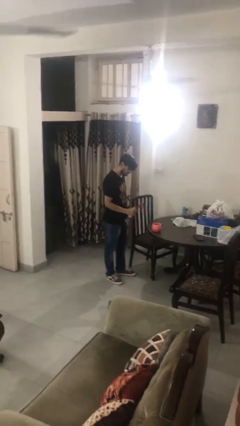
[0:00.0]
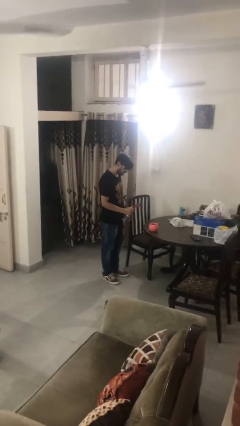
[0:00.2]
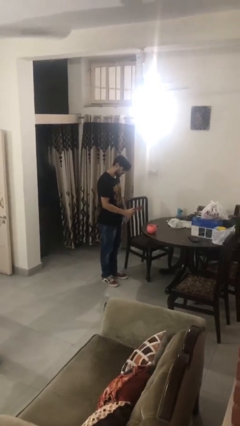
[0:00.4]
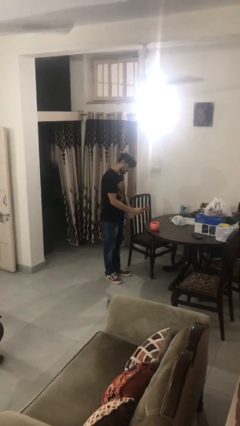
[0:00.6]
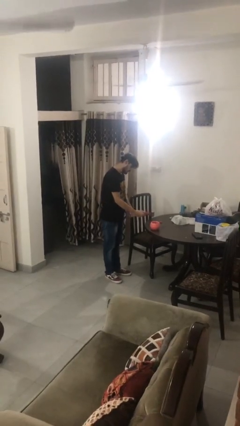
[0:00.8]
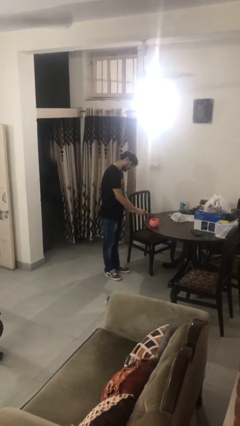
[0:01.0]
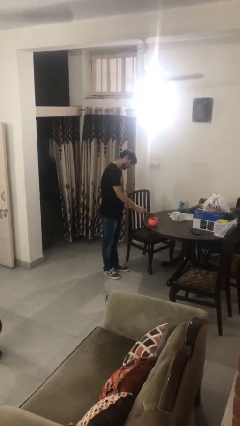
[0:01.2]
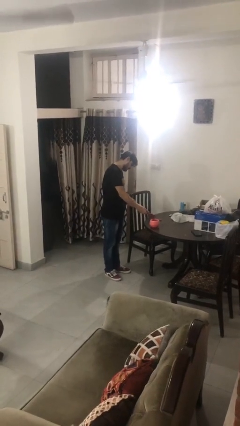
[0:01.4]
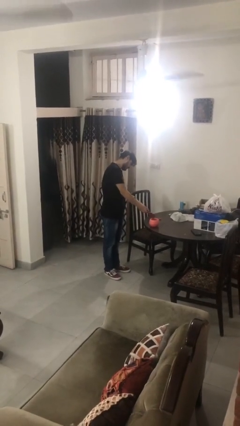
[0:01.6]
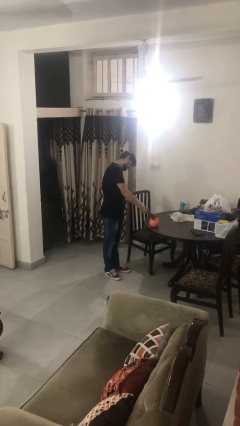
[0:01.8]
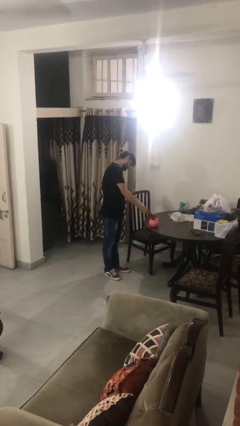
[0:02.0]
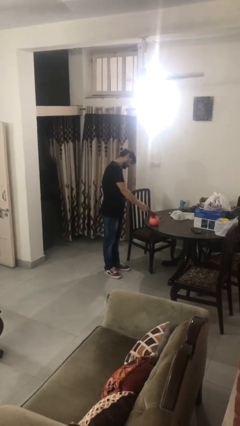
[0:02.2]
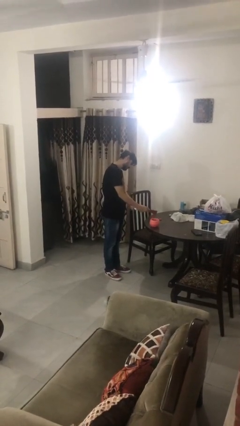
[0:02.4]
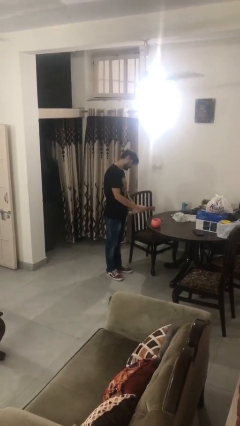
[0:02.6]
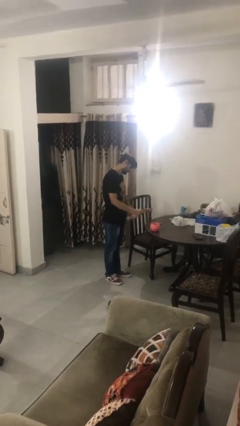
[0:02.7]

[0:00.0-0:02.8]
person waters houseplant

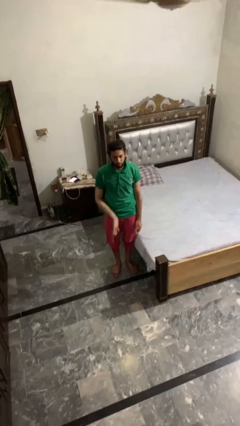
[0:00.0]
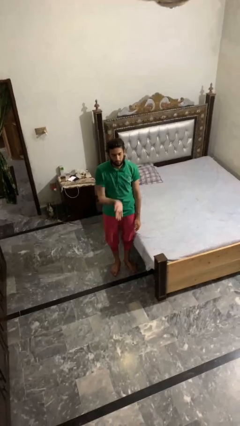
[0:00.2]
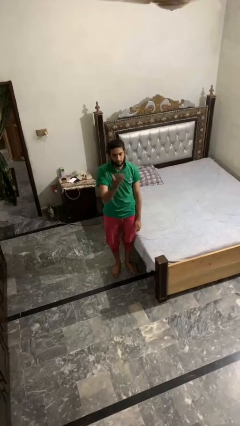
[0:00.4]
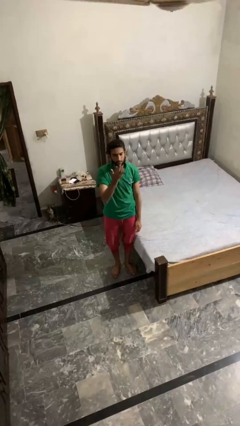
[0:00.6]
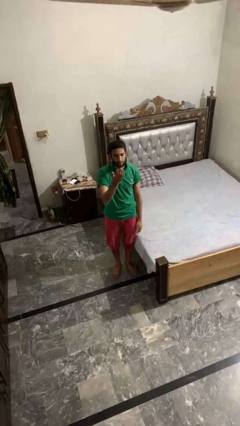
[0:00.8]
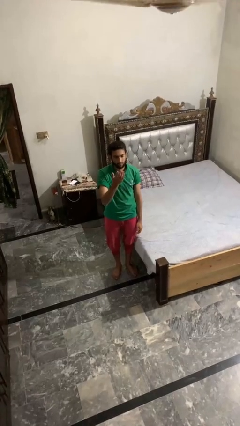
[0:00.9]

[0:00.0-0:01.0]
person gestures swipe up

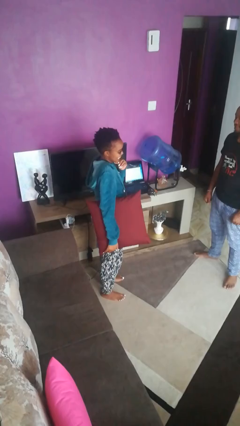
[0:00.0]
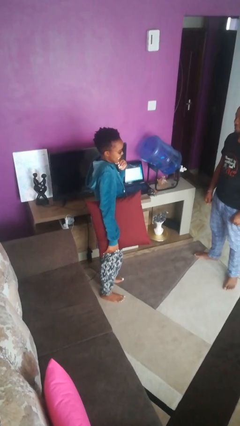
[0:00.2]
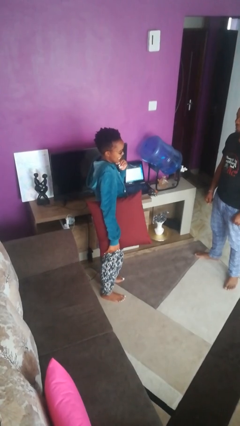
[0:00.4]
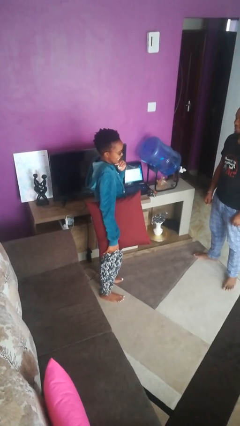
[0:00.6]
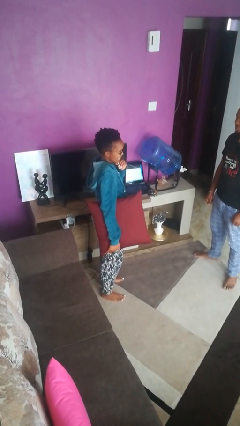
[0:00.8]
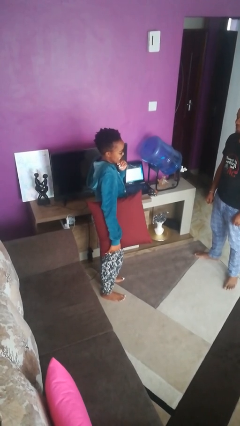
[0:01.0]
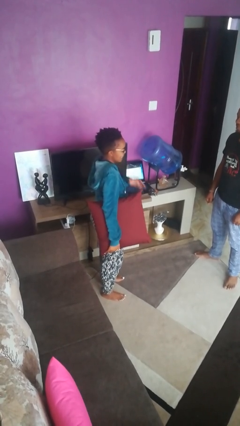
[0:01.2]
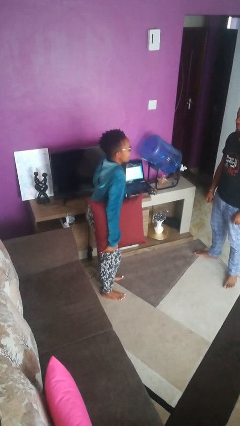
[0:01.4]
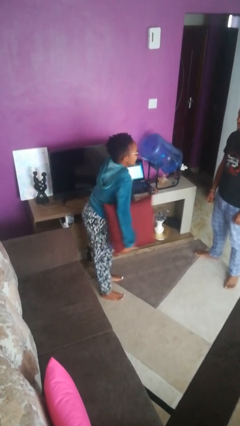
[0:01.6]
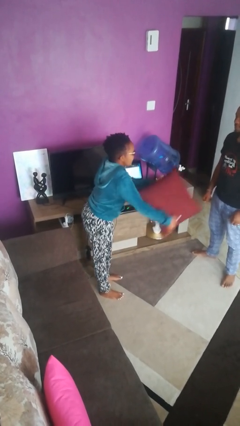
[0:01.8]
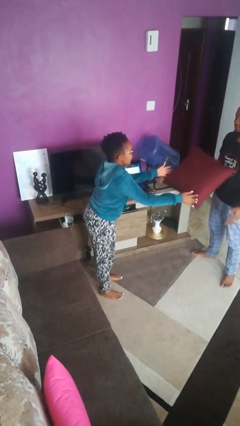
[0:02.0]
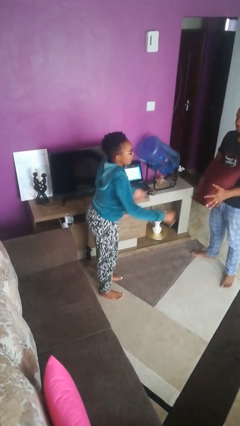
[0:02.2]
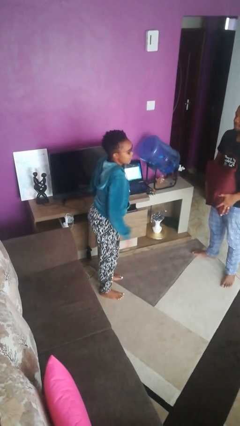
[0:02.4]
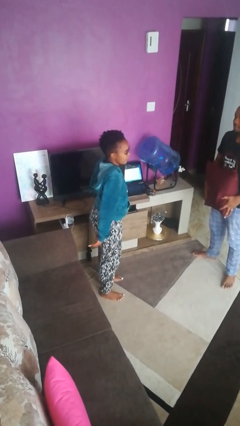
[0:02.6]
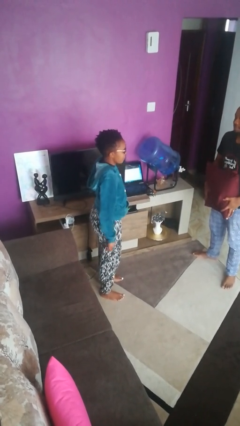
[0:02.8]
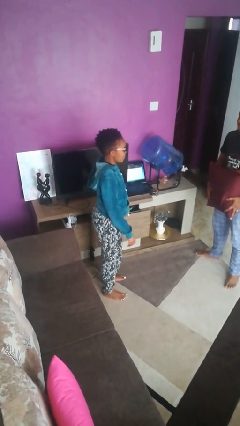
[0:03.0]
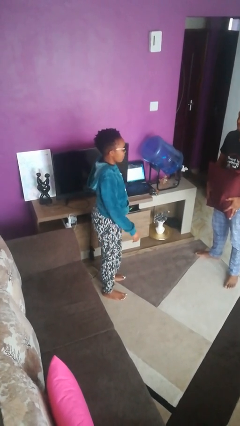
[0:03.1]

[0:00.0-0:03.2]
person throws object to person

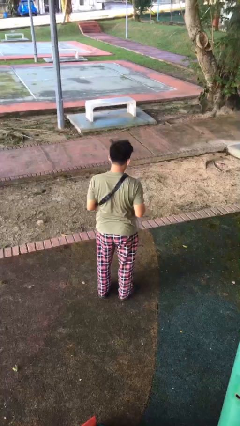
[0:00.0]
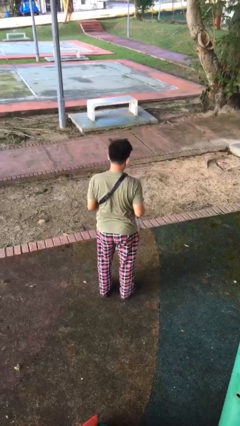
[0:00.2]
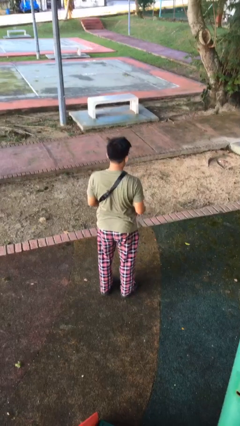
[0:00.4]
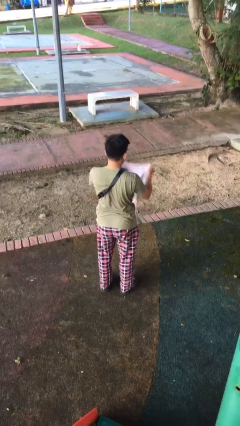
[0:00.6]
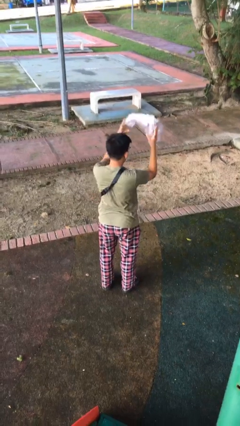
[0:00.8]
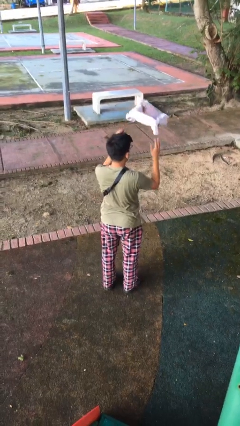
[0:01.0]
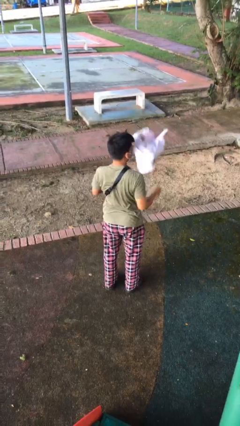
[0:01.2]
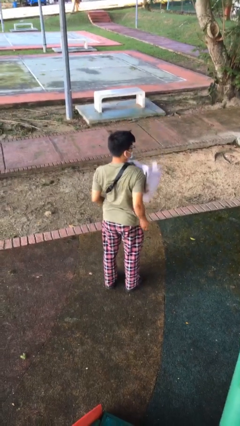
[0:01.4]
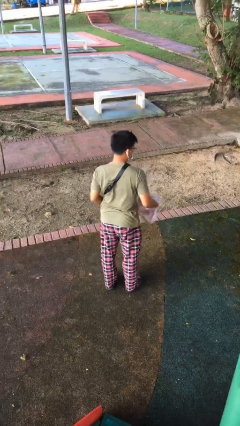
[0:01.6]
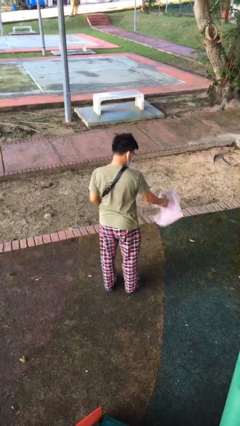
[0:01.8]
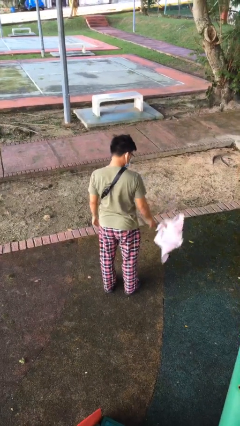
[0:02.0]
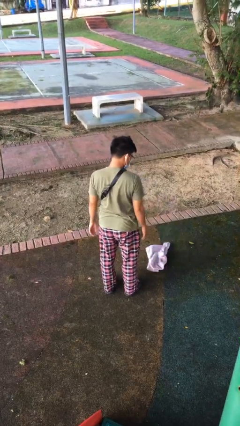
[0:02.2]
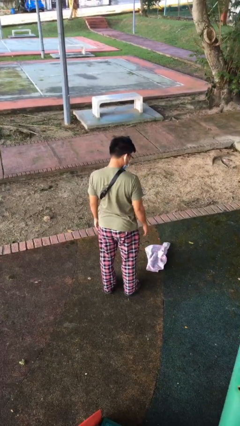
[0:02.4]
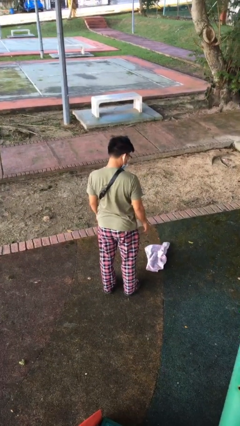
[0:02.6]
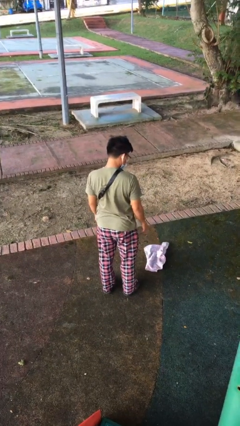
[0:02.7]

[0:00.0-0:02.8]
person throws object into air

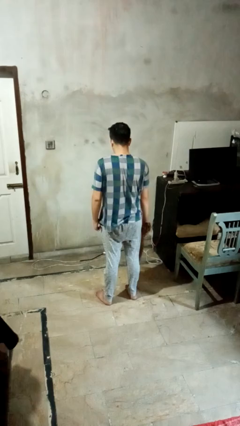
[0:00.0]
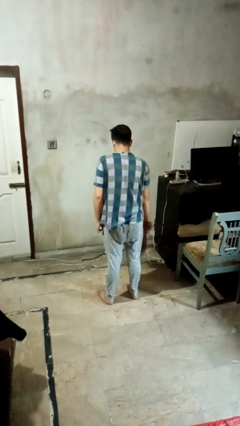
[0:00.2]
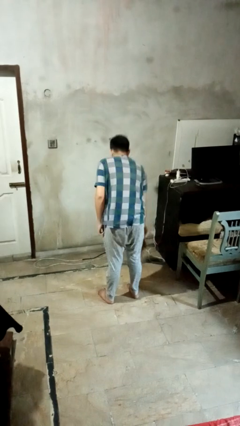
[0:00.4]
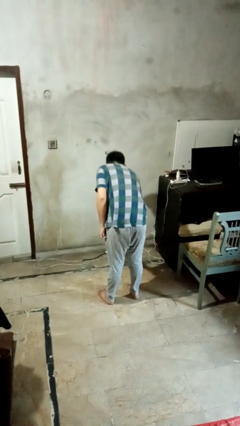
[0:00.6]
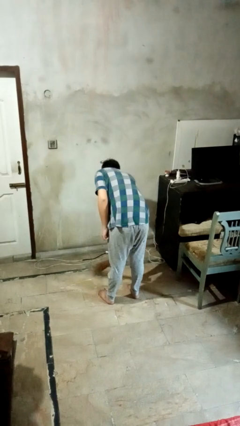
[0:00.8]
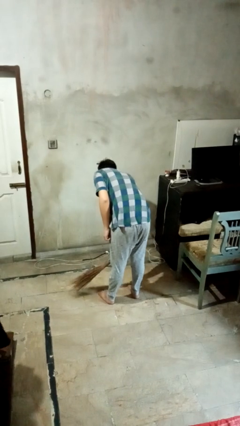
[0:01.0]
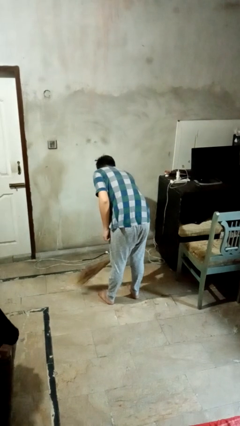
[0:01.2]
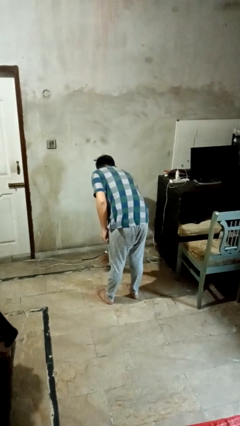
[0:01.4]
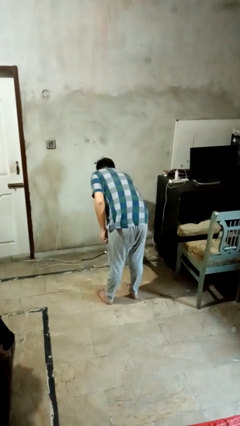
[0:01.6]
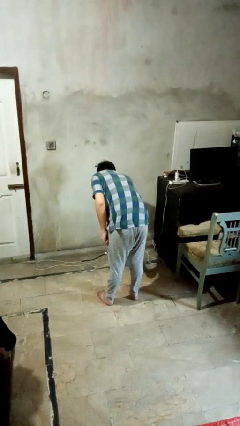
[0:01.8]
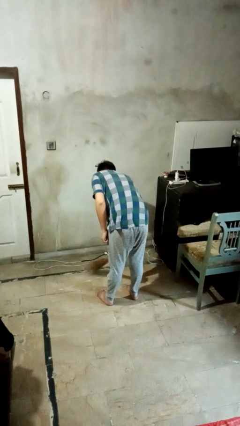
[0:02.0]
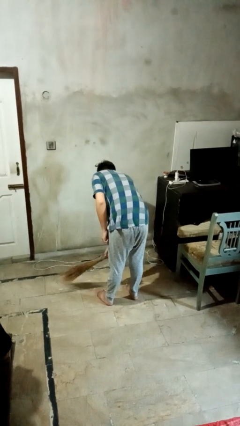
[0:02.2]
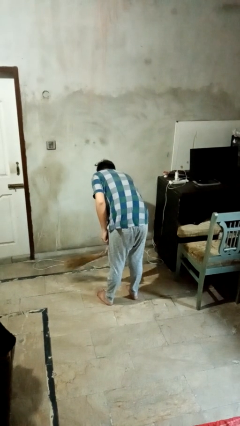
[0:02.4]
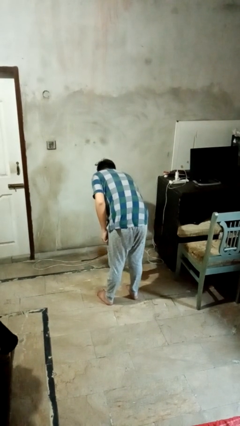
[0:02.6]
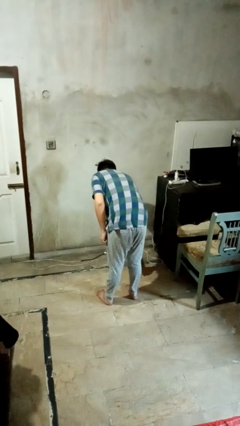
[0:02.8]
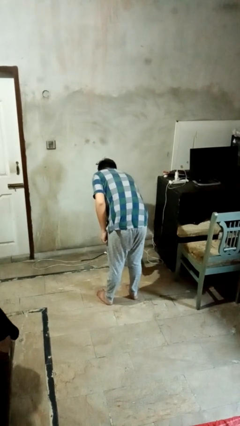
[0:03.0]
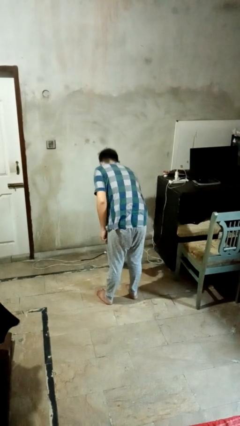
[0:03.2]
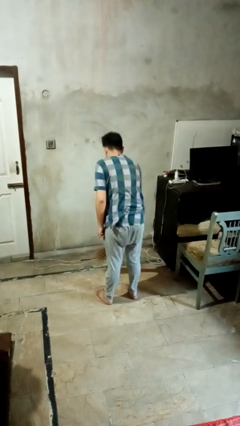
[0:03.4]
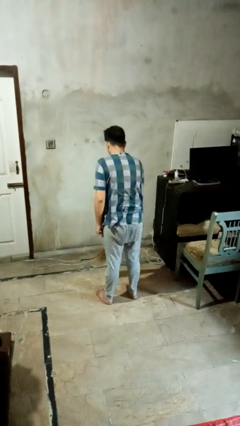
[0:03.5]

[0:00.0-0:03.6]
person sweeps floor

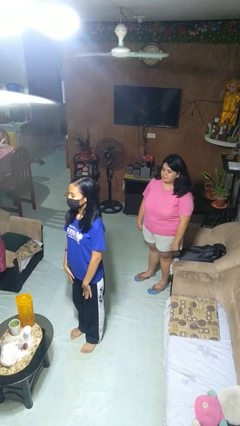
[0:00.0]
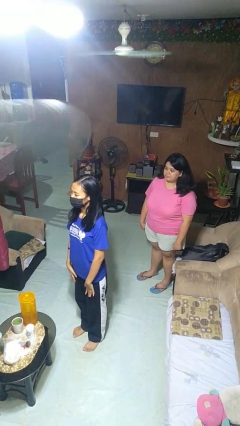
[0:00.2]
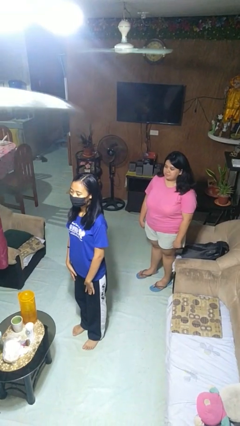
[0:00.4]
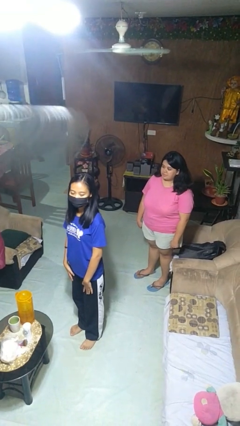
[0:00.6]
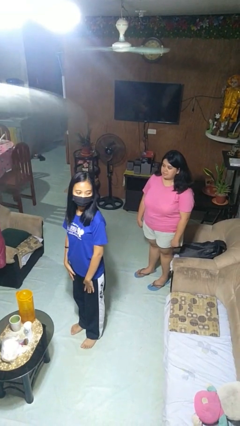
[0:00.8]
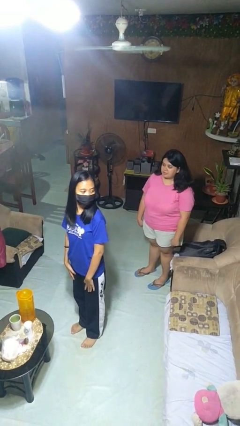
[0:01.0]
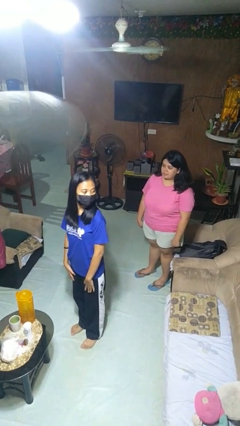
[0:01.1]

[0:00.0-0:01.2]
person looks over shoulder

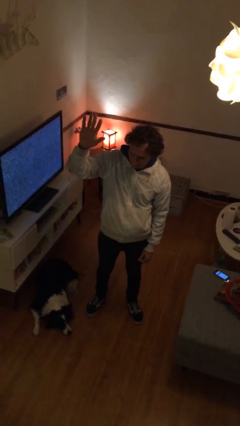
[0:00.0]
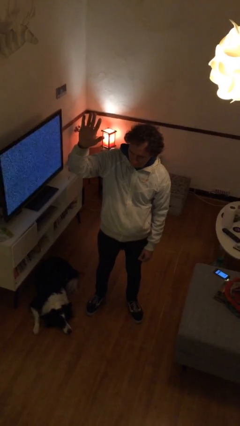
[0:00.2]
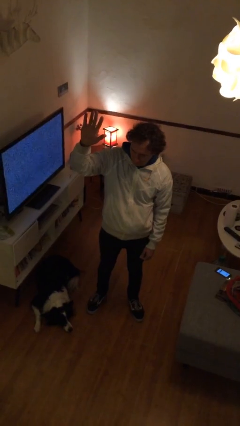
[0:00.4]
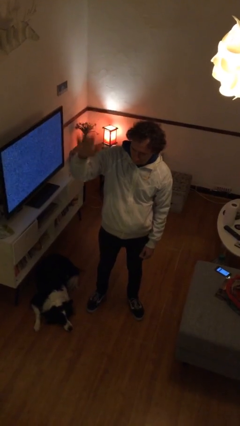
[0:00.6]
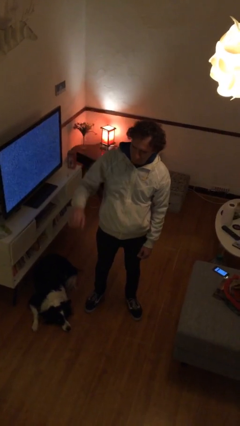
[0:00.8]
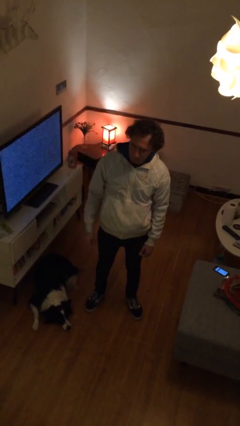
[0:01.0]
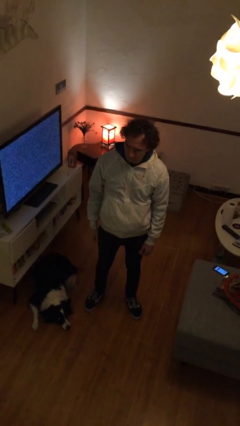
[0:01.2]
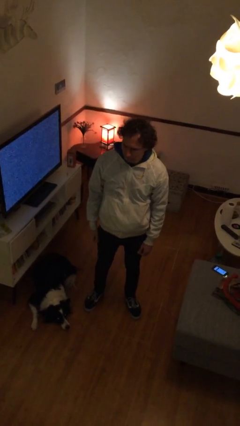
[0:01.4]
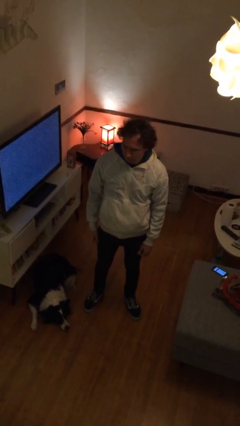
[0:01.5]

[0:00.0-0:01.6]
person gestures lower hand

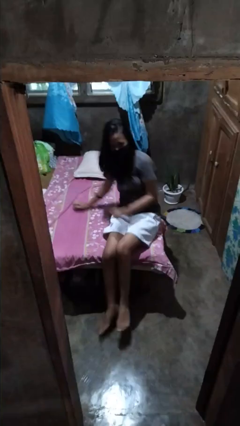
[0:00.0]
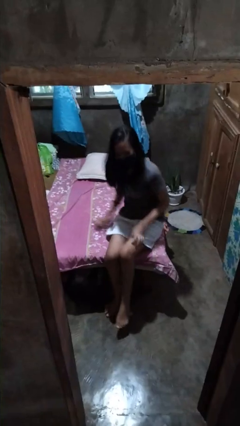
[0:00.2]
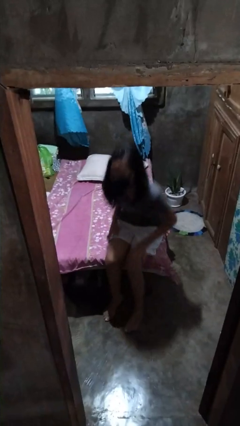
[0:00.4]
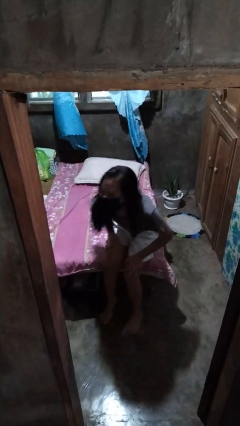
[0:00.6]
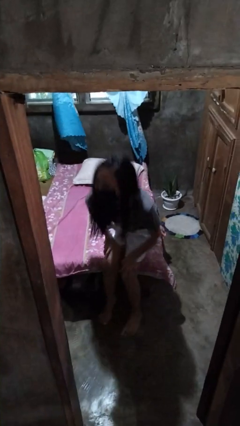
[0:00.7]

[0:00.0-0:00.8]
person stands up
